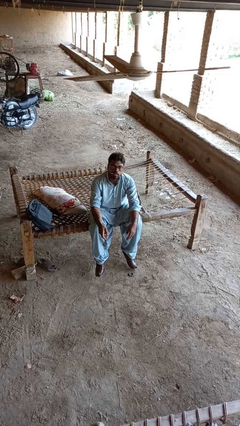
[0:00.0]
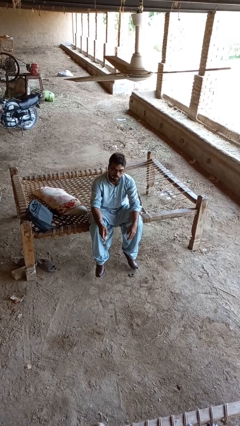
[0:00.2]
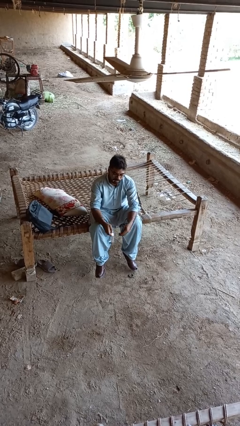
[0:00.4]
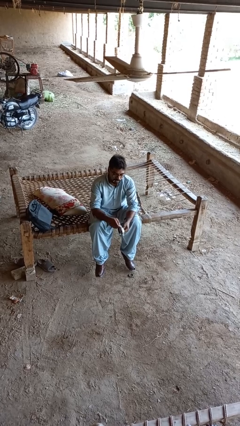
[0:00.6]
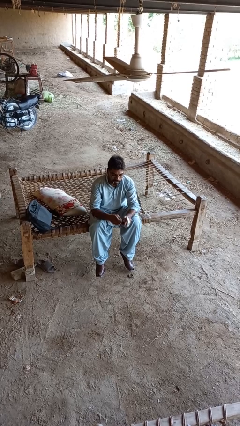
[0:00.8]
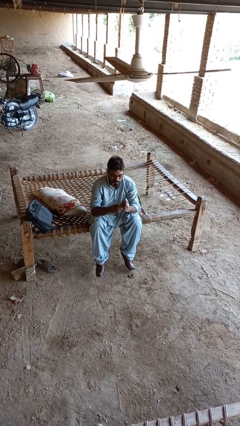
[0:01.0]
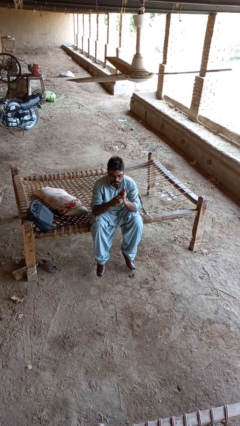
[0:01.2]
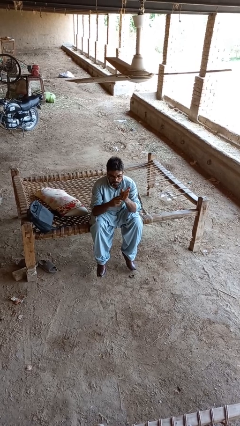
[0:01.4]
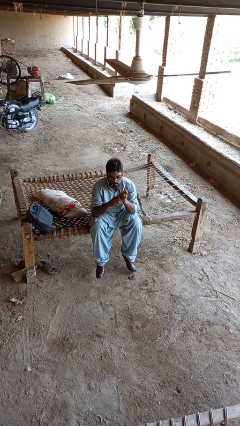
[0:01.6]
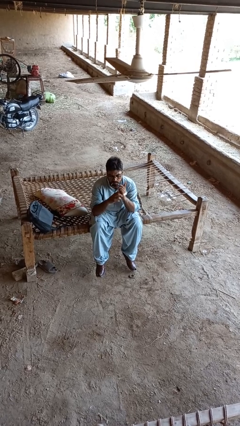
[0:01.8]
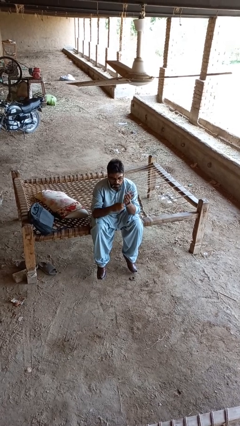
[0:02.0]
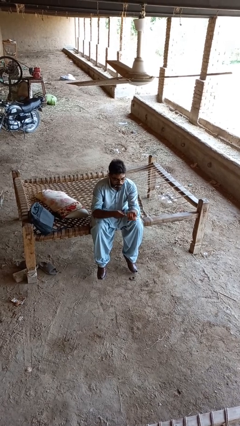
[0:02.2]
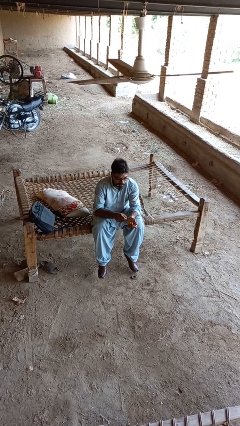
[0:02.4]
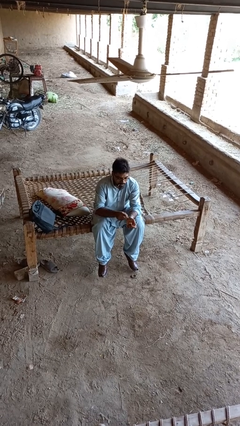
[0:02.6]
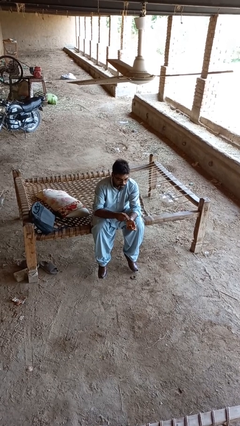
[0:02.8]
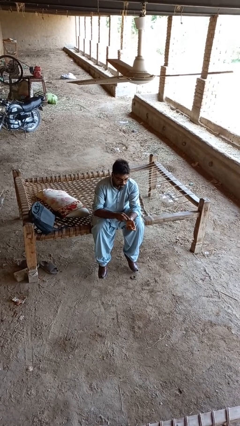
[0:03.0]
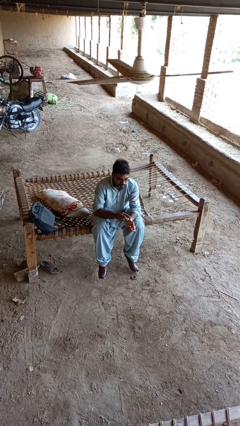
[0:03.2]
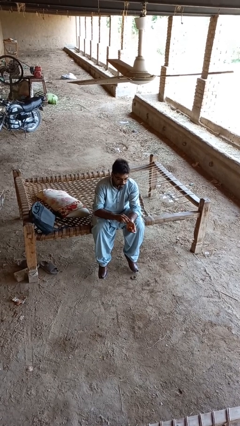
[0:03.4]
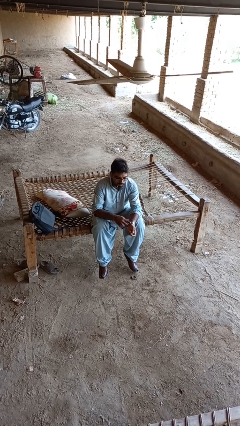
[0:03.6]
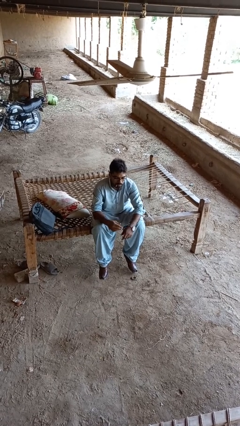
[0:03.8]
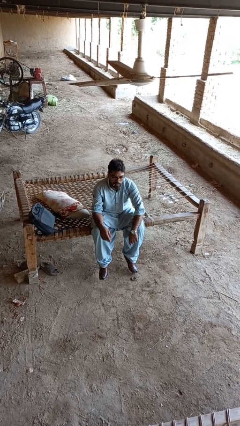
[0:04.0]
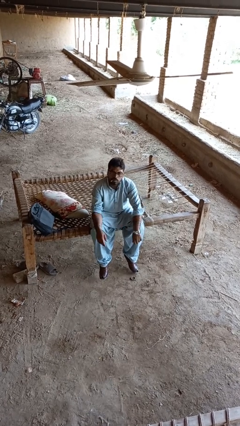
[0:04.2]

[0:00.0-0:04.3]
person puts on wristwatch

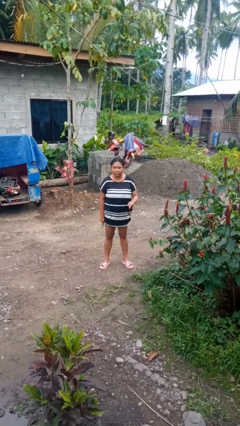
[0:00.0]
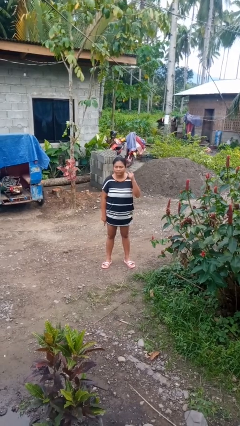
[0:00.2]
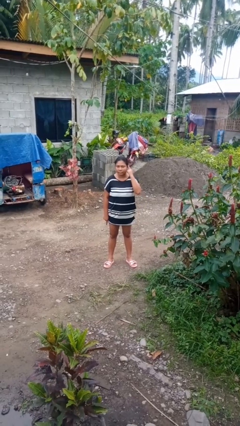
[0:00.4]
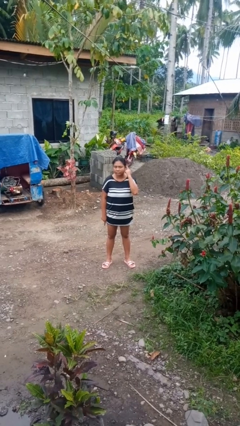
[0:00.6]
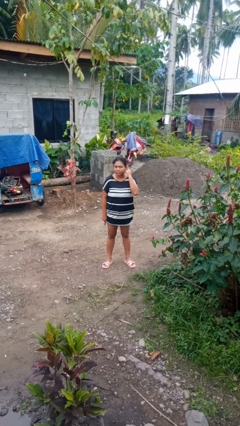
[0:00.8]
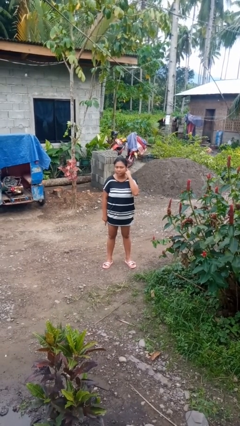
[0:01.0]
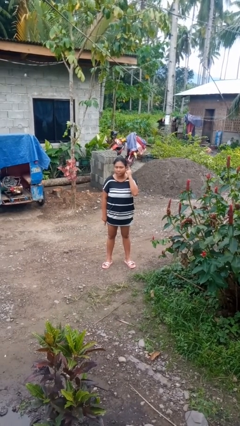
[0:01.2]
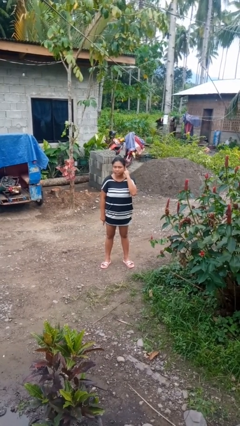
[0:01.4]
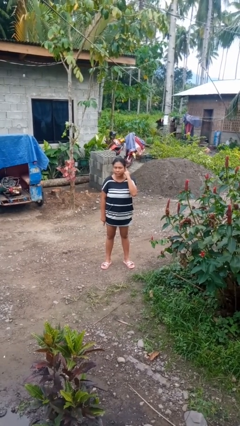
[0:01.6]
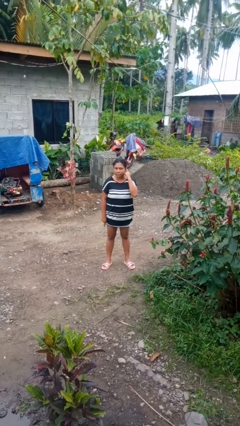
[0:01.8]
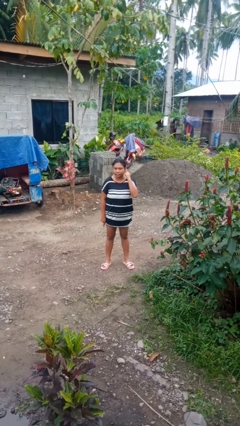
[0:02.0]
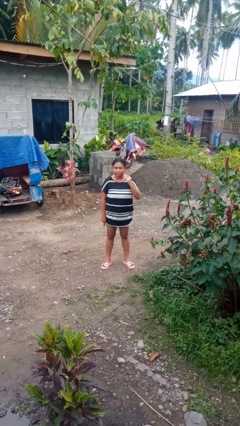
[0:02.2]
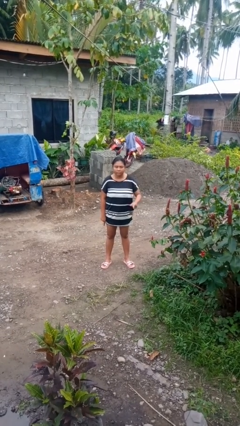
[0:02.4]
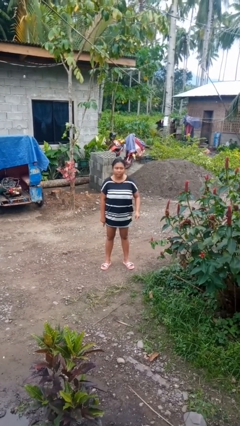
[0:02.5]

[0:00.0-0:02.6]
person gestures listen closely

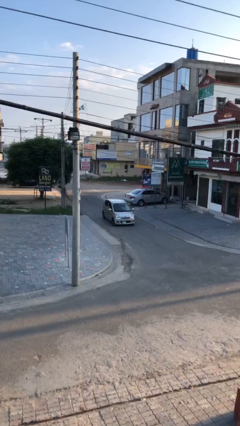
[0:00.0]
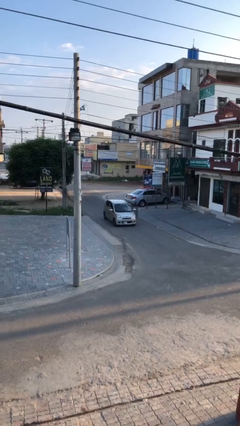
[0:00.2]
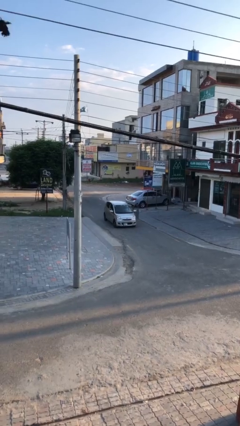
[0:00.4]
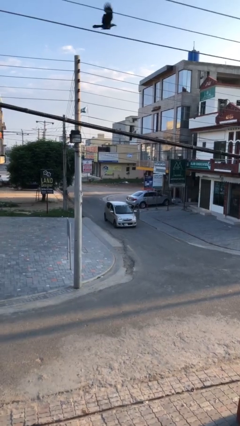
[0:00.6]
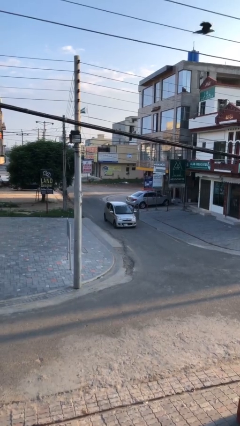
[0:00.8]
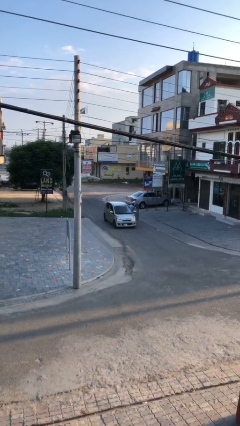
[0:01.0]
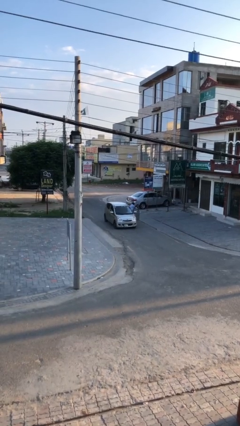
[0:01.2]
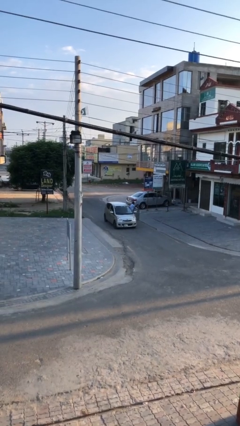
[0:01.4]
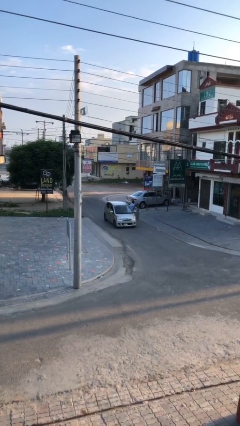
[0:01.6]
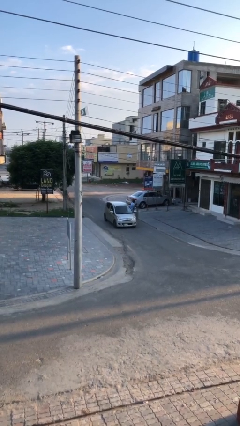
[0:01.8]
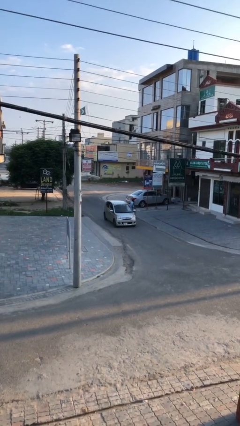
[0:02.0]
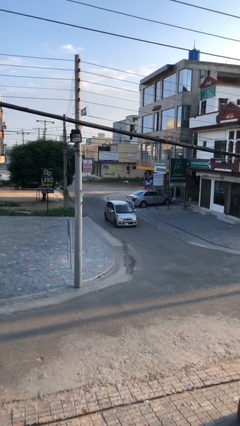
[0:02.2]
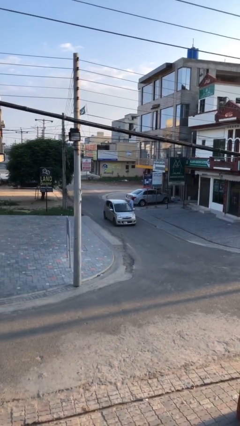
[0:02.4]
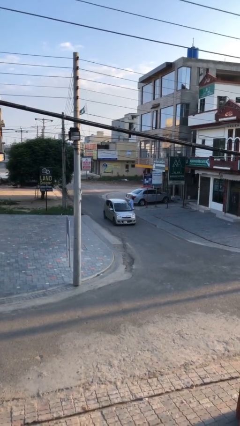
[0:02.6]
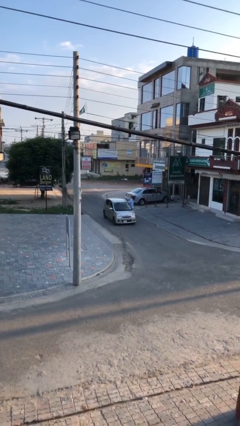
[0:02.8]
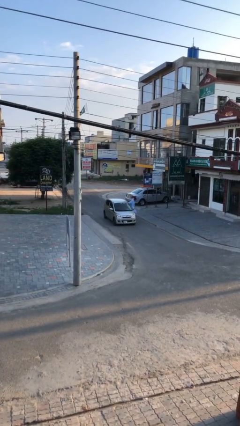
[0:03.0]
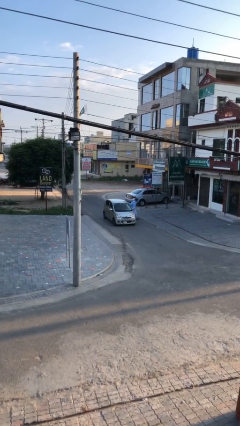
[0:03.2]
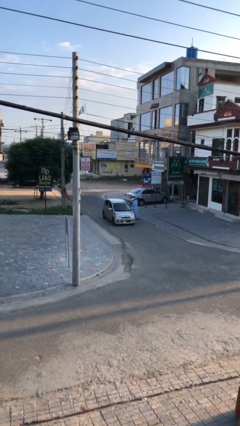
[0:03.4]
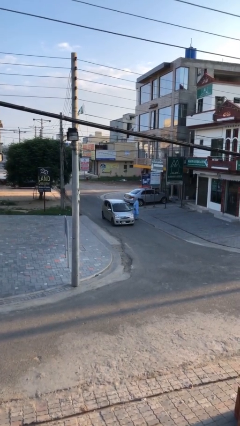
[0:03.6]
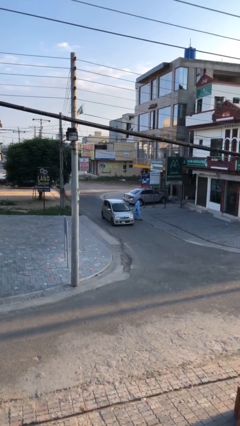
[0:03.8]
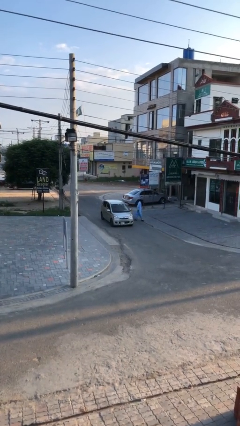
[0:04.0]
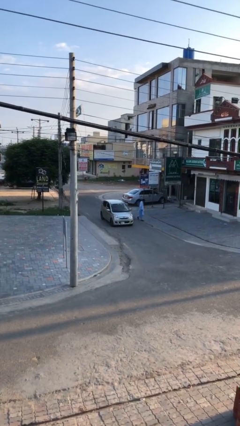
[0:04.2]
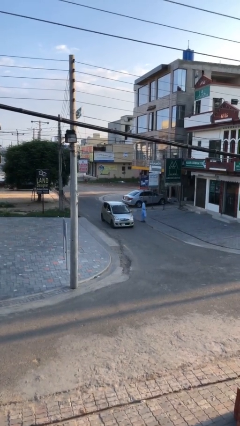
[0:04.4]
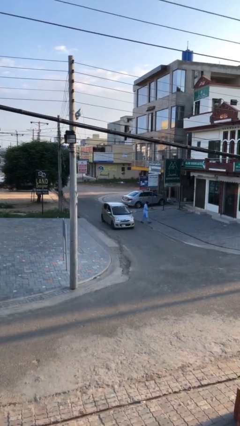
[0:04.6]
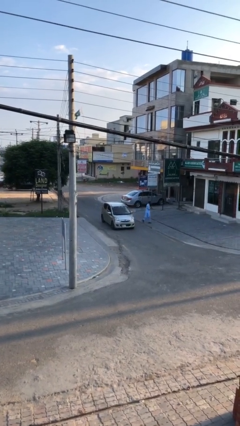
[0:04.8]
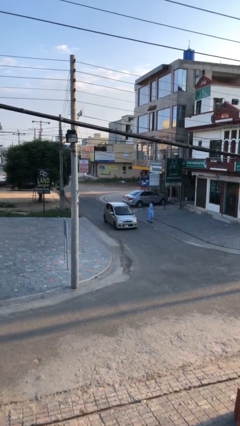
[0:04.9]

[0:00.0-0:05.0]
car drops off person

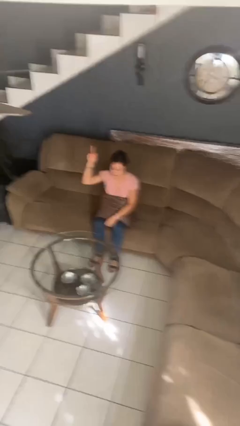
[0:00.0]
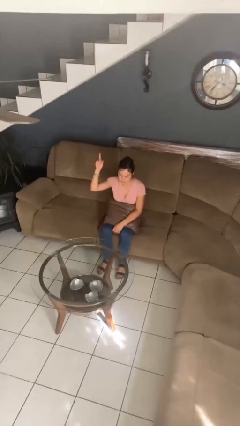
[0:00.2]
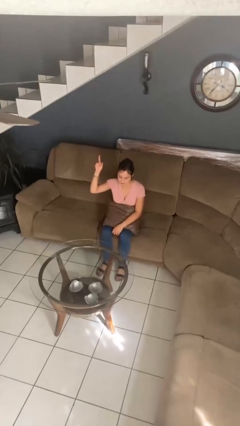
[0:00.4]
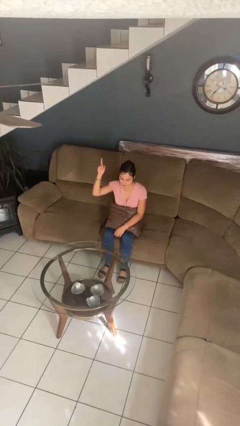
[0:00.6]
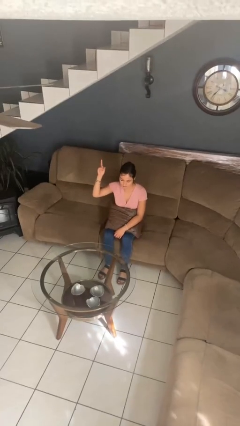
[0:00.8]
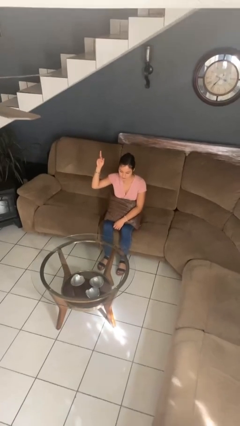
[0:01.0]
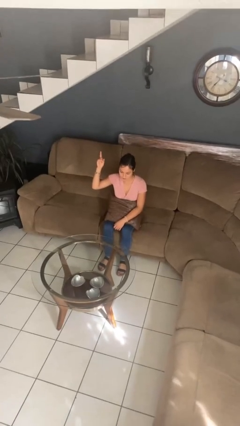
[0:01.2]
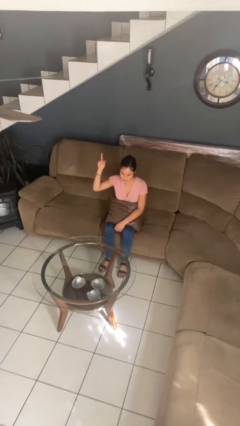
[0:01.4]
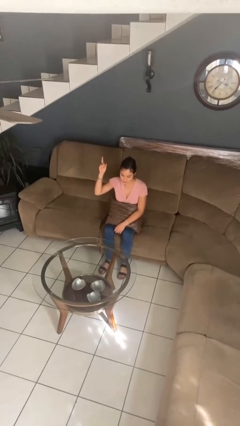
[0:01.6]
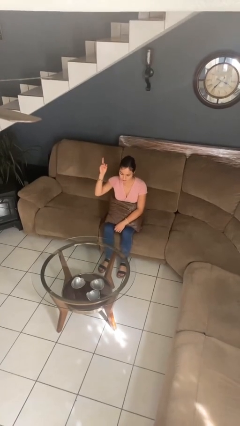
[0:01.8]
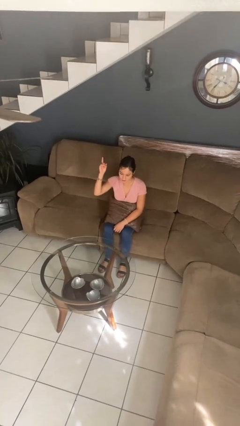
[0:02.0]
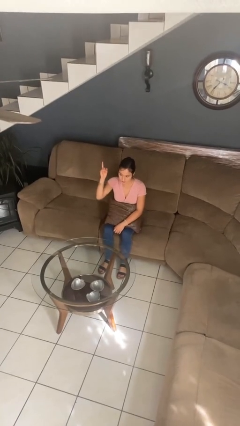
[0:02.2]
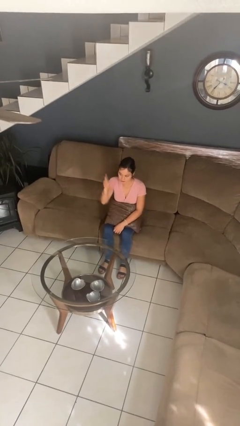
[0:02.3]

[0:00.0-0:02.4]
person gestures number one

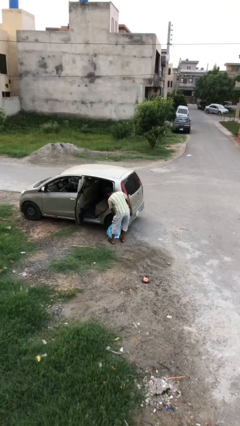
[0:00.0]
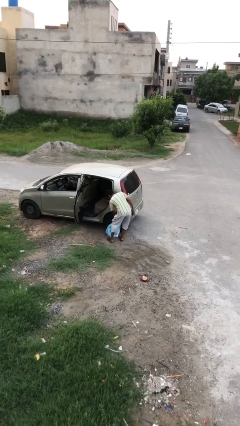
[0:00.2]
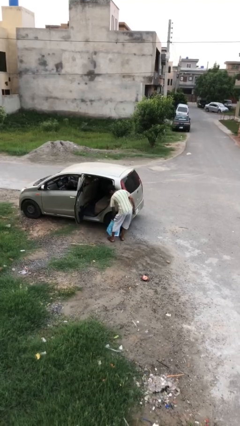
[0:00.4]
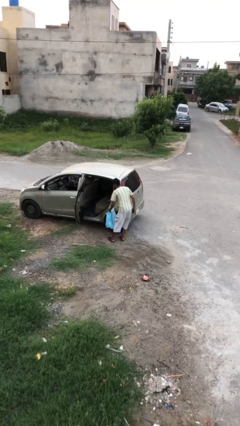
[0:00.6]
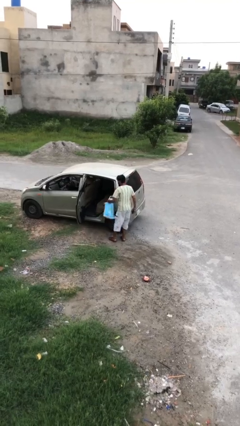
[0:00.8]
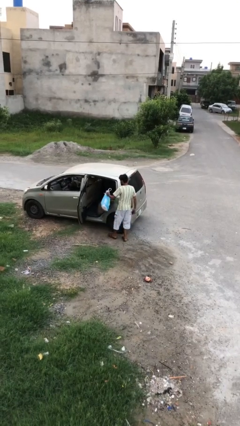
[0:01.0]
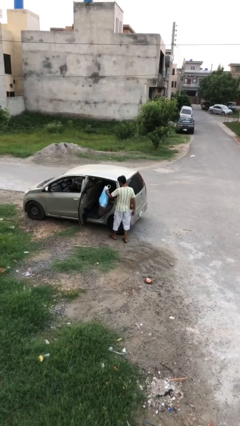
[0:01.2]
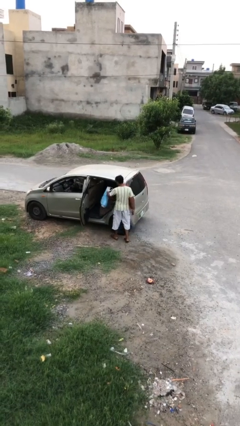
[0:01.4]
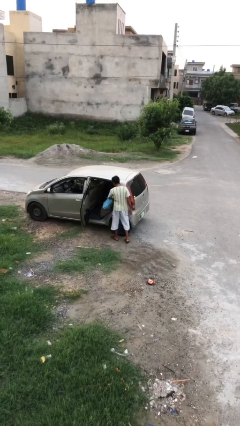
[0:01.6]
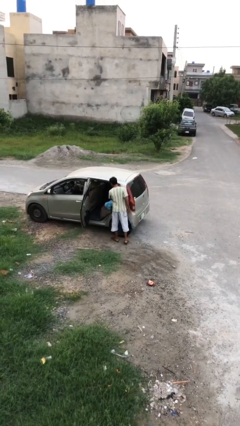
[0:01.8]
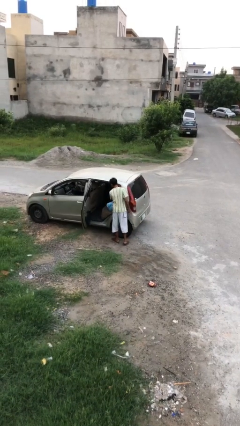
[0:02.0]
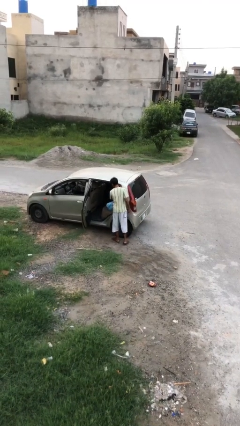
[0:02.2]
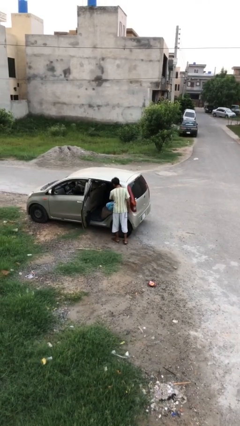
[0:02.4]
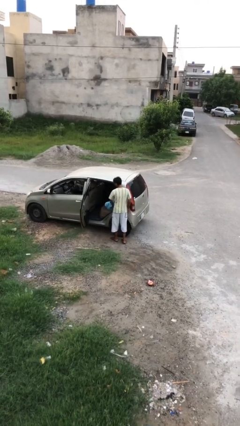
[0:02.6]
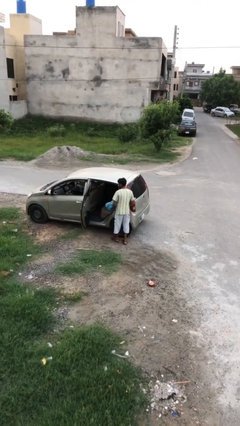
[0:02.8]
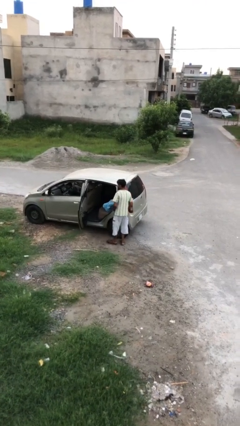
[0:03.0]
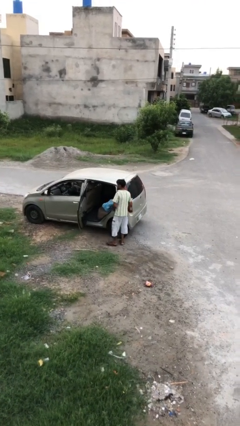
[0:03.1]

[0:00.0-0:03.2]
person loads car

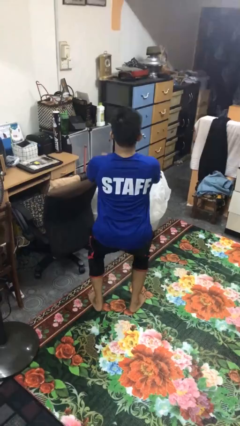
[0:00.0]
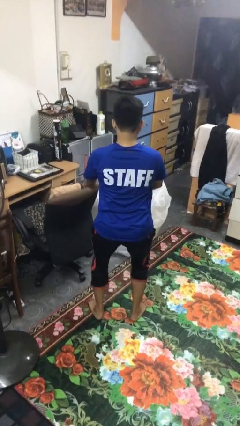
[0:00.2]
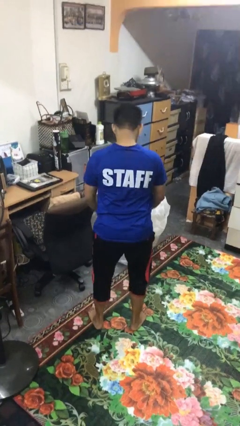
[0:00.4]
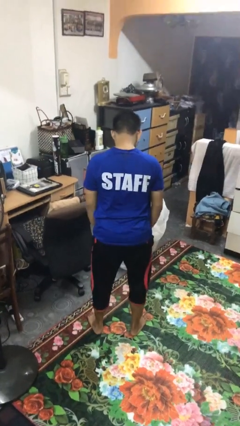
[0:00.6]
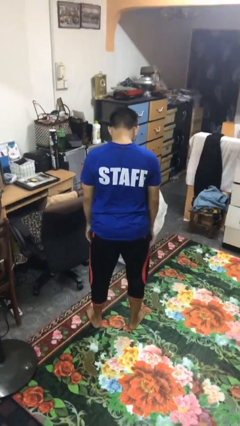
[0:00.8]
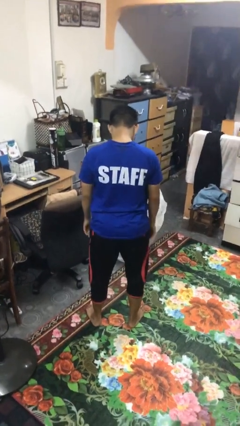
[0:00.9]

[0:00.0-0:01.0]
person stands up
